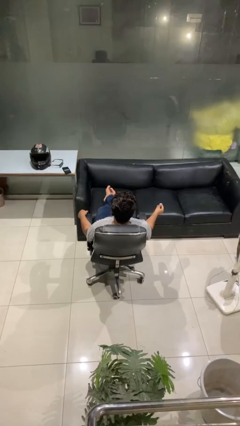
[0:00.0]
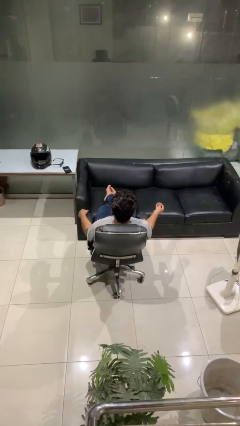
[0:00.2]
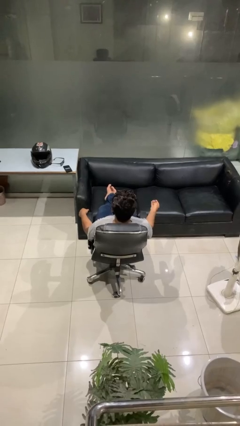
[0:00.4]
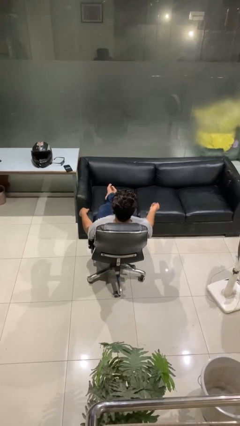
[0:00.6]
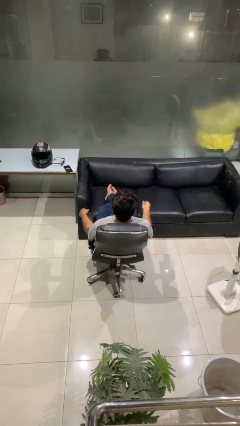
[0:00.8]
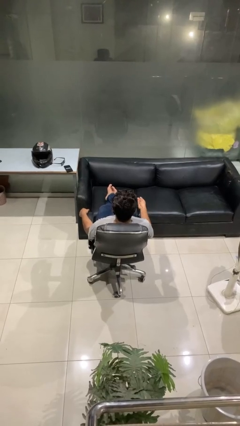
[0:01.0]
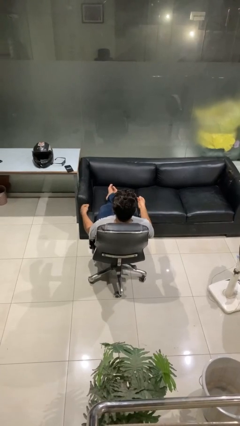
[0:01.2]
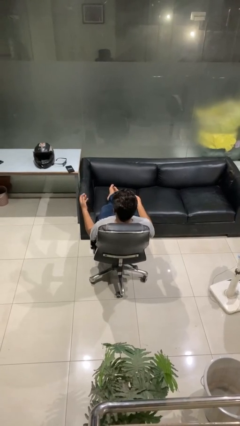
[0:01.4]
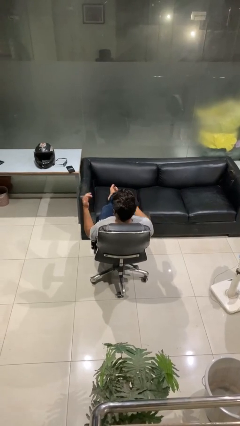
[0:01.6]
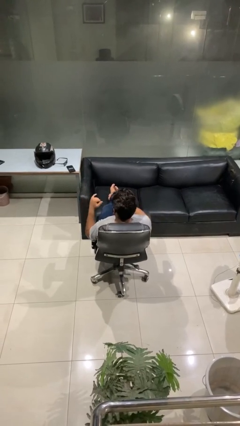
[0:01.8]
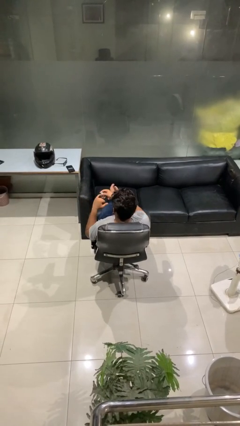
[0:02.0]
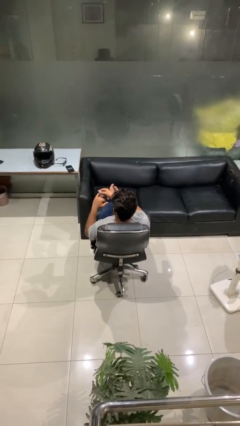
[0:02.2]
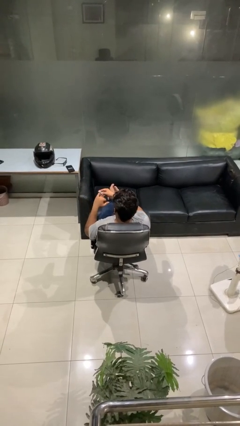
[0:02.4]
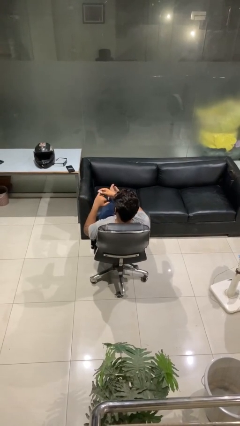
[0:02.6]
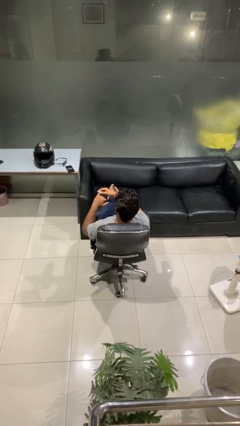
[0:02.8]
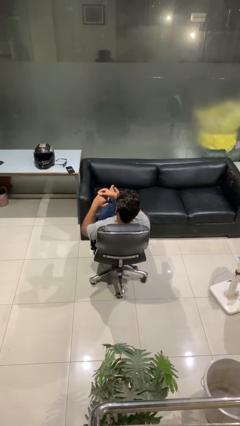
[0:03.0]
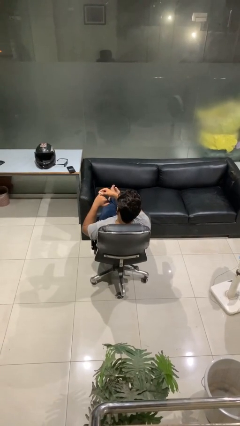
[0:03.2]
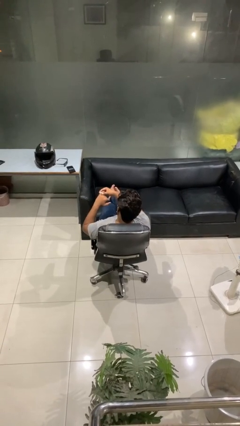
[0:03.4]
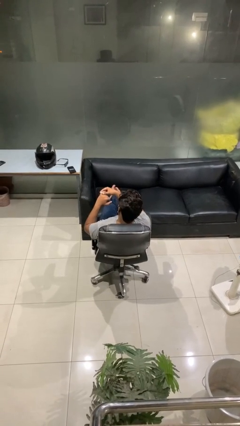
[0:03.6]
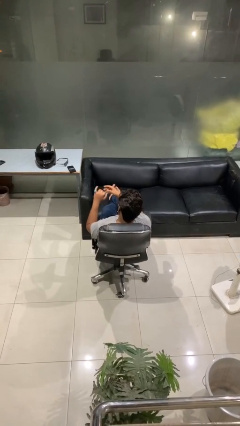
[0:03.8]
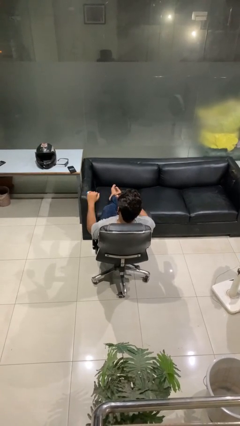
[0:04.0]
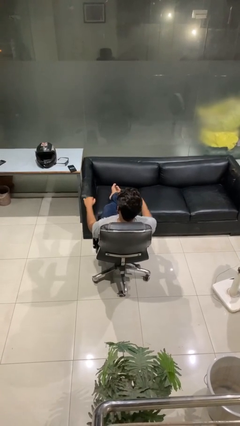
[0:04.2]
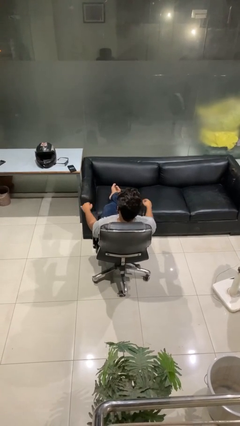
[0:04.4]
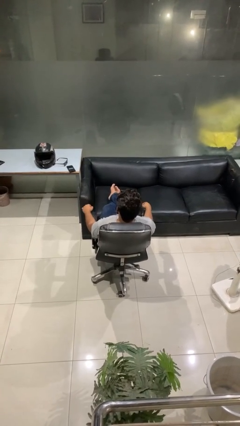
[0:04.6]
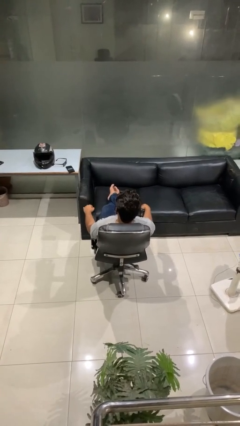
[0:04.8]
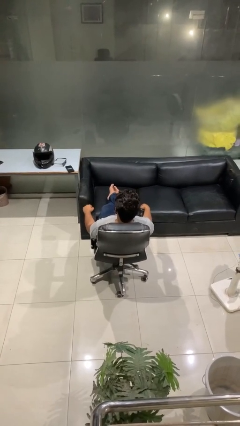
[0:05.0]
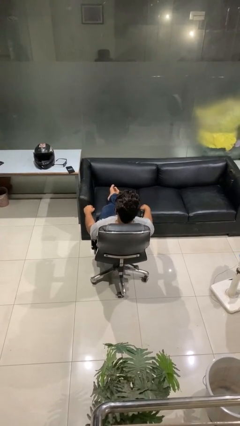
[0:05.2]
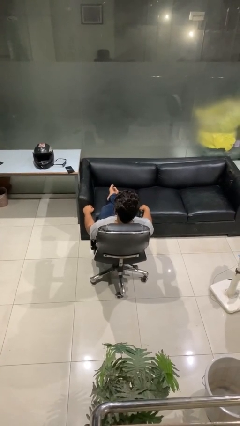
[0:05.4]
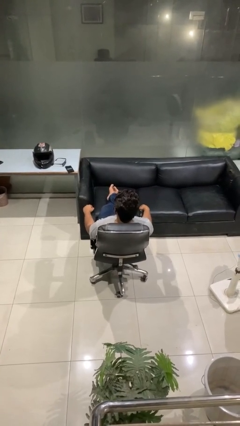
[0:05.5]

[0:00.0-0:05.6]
person puts on ring

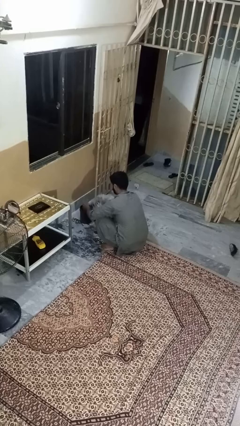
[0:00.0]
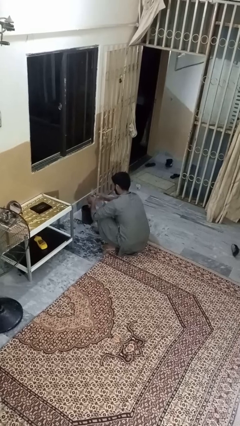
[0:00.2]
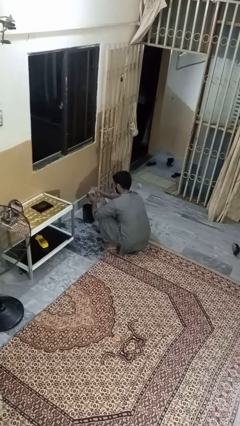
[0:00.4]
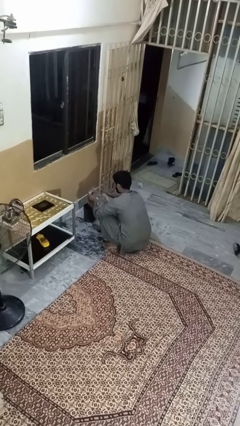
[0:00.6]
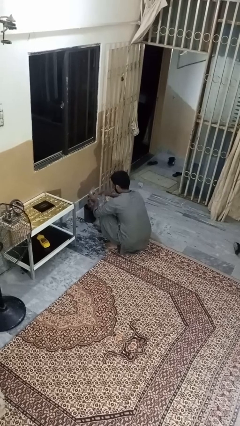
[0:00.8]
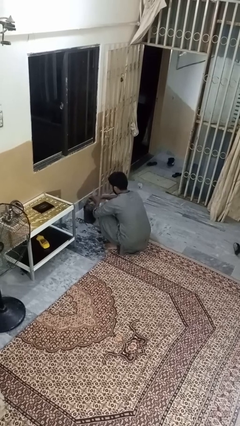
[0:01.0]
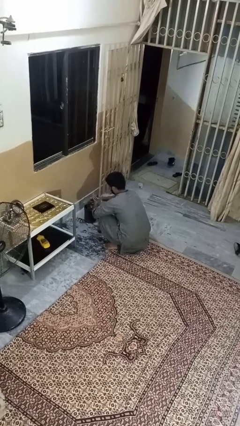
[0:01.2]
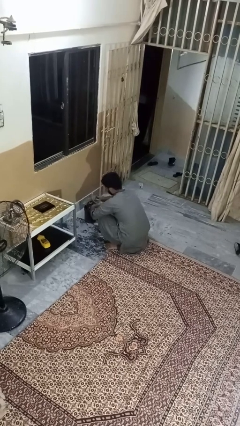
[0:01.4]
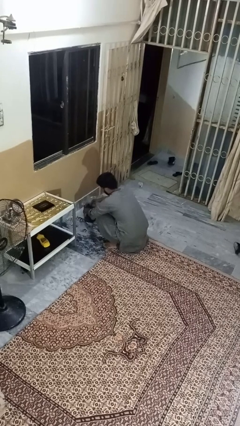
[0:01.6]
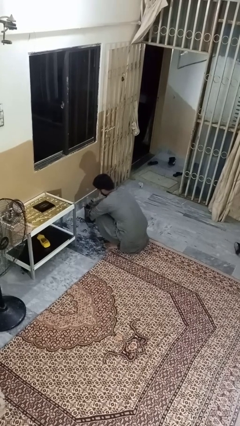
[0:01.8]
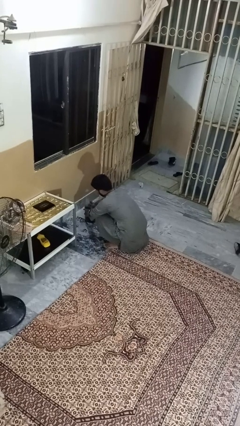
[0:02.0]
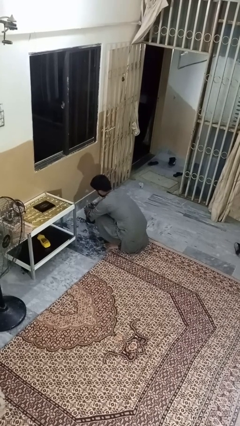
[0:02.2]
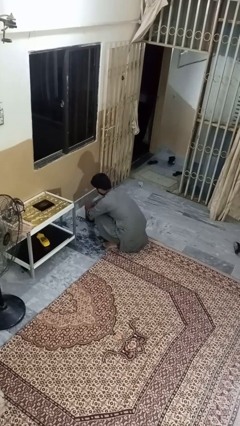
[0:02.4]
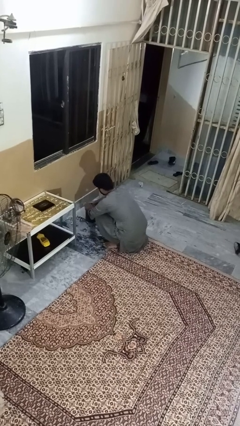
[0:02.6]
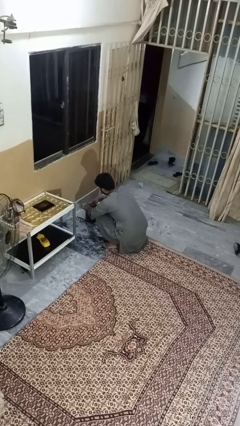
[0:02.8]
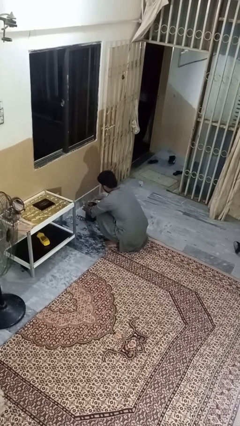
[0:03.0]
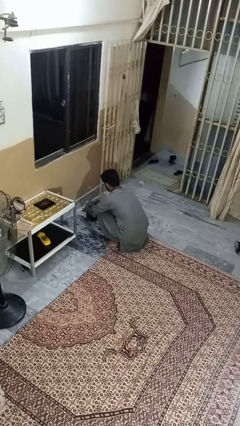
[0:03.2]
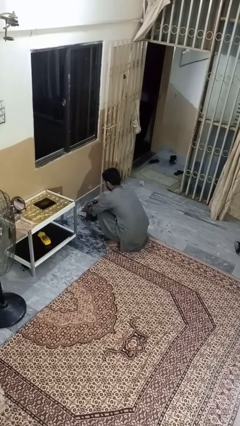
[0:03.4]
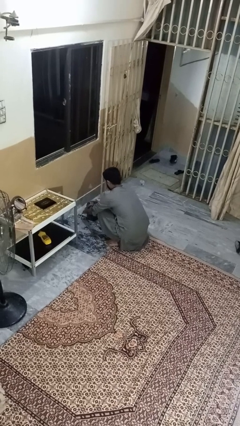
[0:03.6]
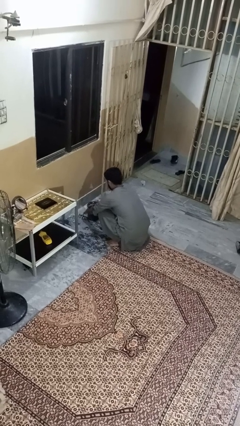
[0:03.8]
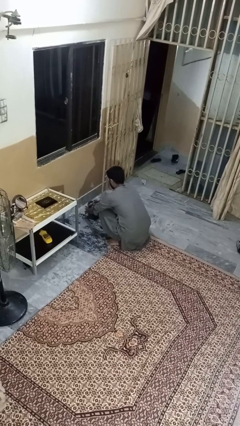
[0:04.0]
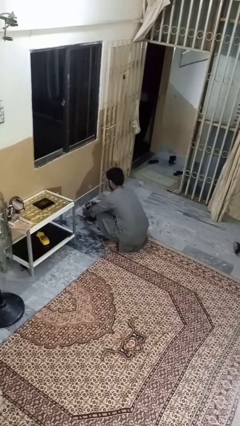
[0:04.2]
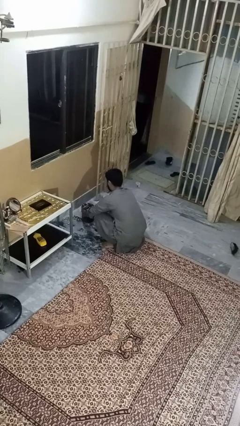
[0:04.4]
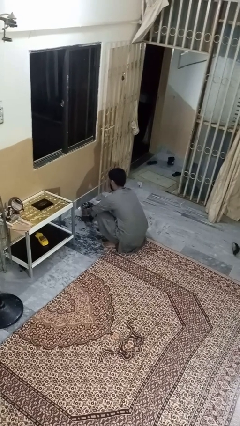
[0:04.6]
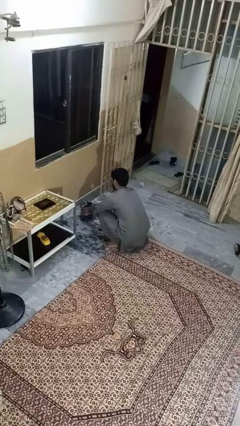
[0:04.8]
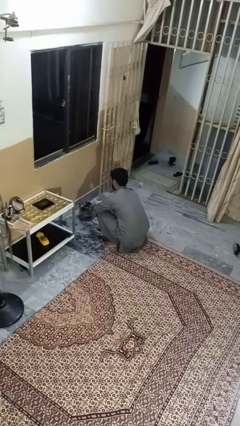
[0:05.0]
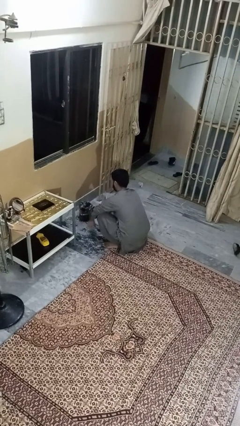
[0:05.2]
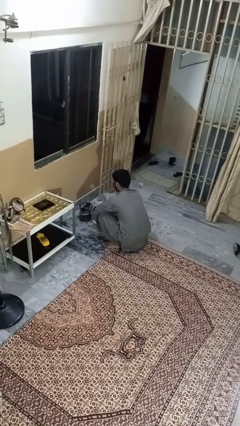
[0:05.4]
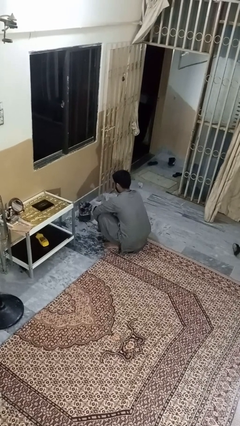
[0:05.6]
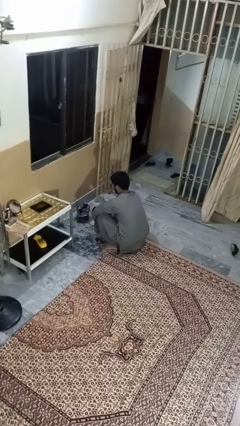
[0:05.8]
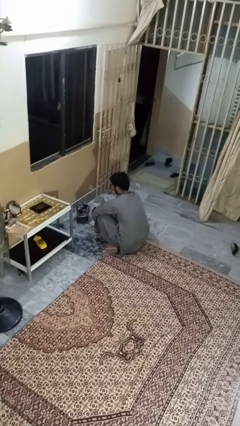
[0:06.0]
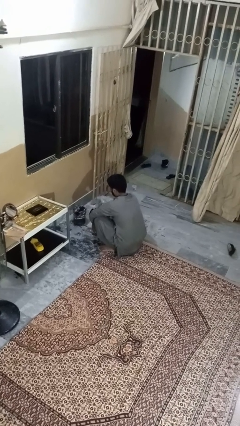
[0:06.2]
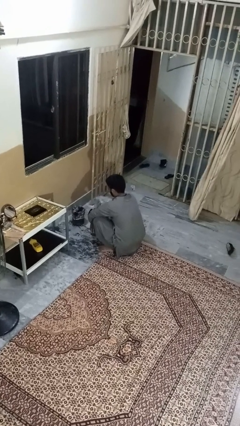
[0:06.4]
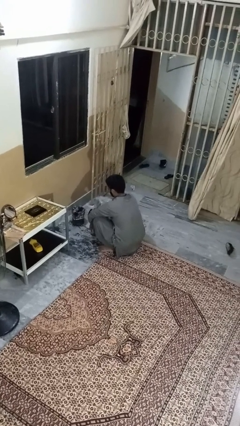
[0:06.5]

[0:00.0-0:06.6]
person inserts trashbag into trashcan

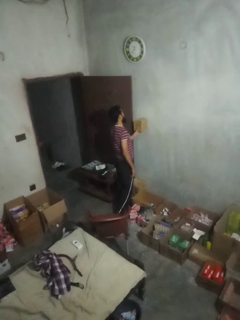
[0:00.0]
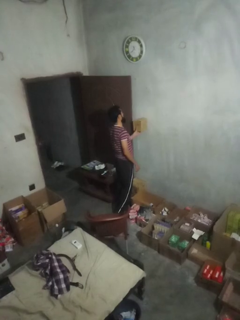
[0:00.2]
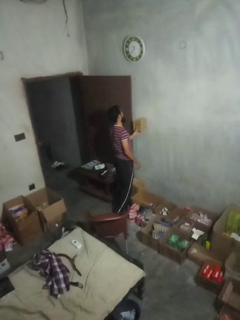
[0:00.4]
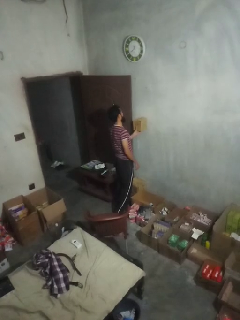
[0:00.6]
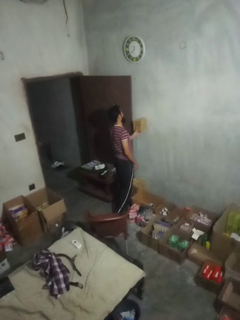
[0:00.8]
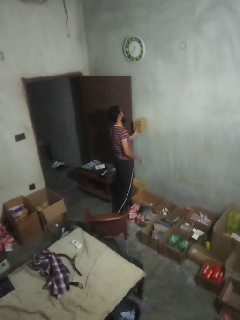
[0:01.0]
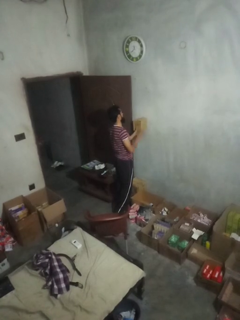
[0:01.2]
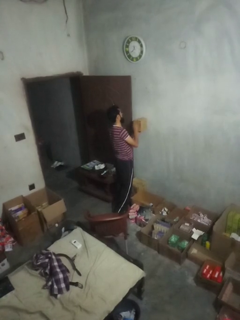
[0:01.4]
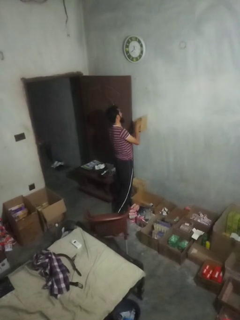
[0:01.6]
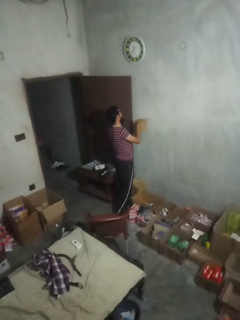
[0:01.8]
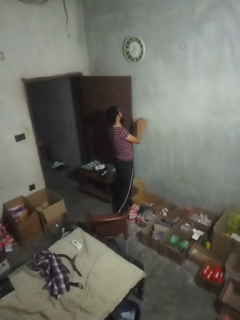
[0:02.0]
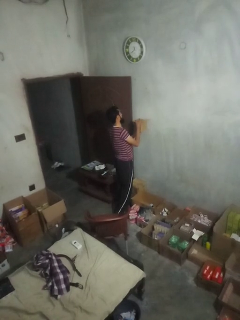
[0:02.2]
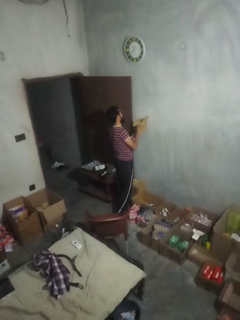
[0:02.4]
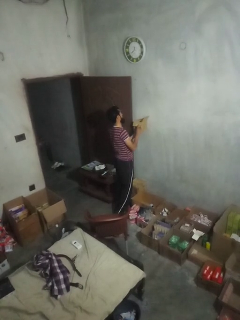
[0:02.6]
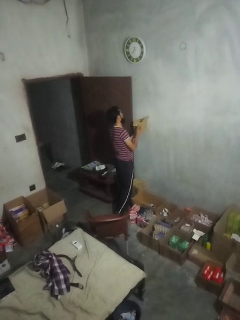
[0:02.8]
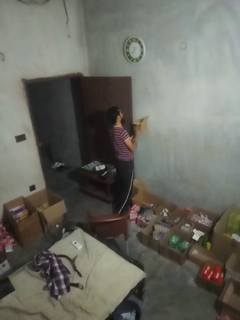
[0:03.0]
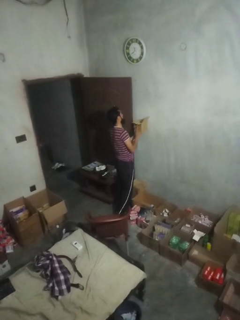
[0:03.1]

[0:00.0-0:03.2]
person opens mailbox

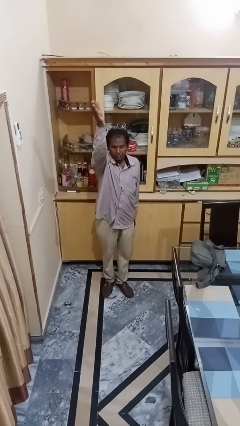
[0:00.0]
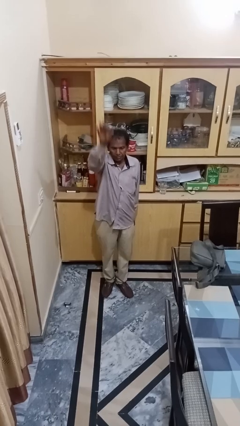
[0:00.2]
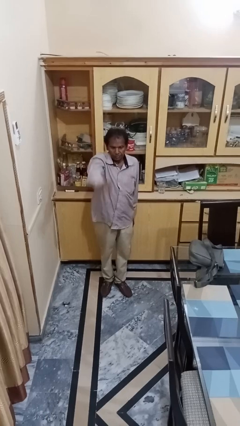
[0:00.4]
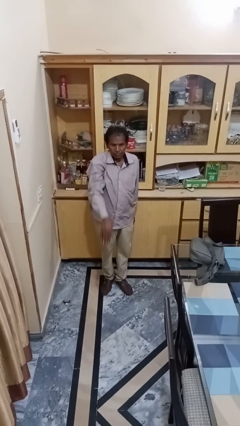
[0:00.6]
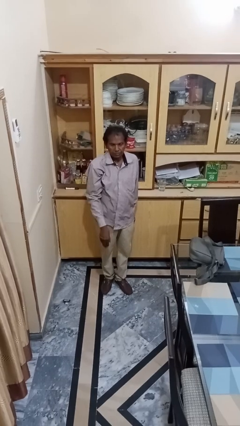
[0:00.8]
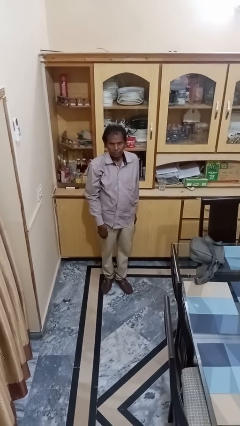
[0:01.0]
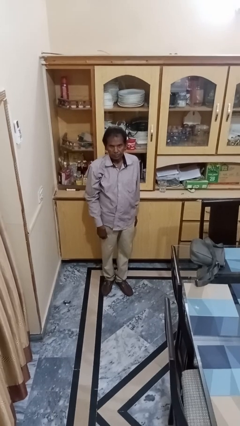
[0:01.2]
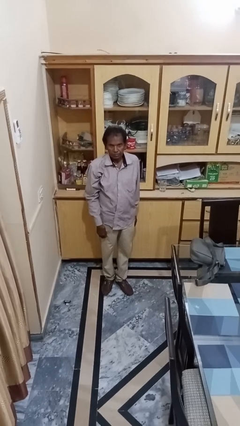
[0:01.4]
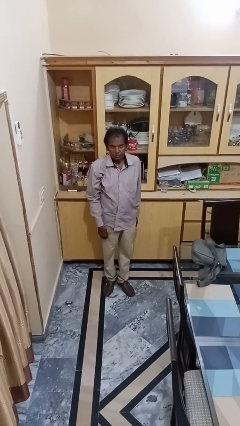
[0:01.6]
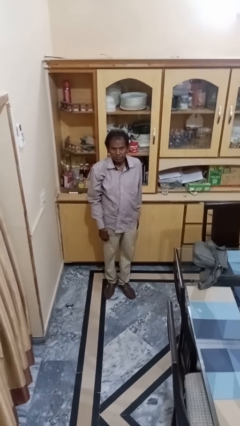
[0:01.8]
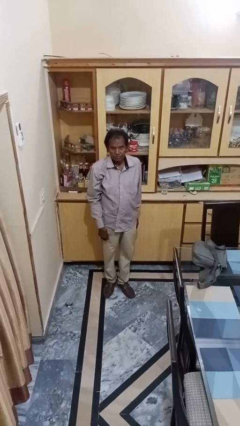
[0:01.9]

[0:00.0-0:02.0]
person gestures swipe down

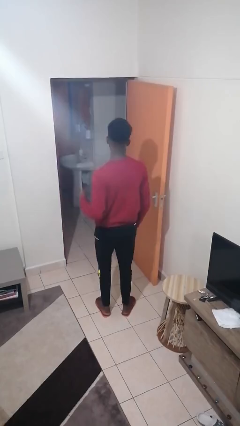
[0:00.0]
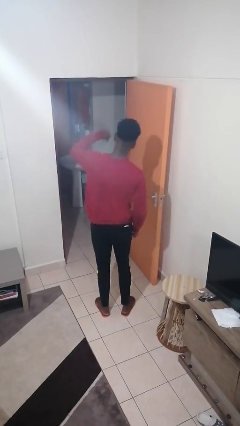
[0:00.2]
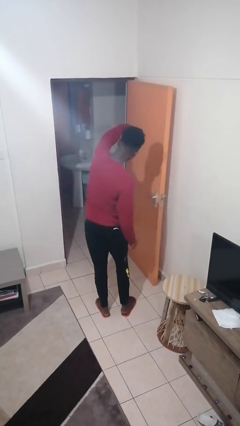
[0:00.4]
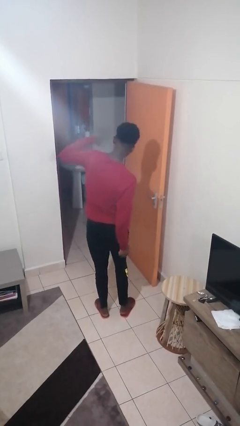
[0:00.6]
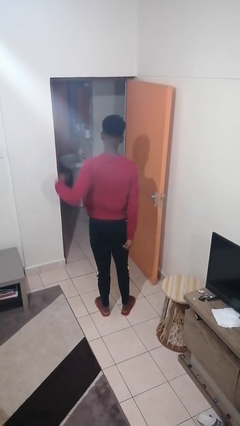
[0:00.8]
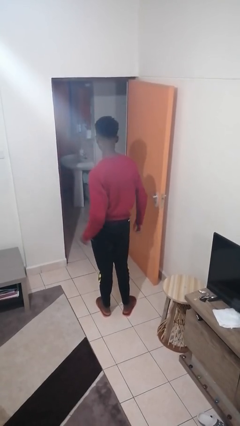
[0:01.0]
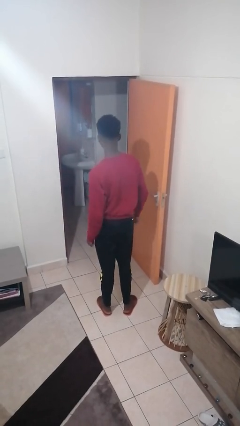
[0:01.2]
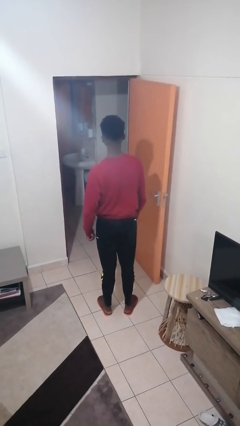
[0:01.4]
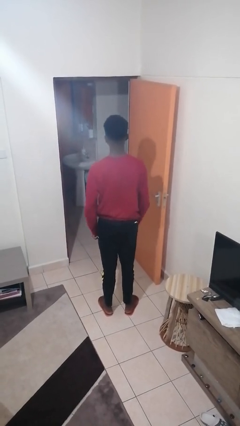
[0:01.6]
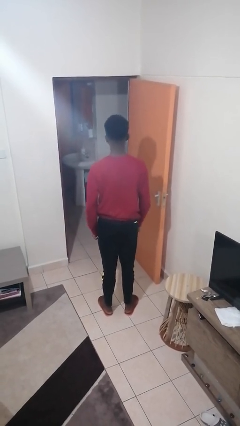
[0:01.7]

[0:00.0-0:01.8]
person punches
